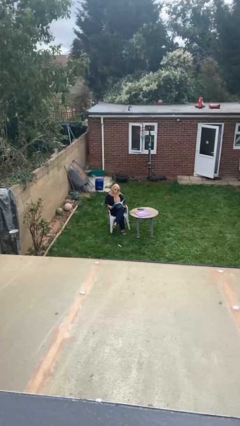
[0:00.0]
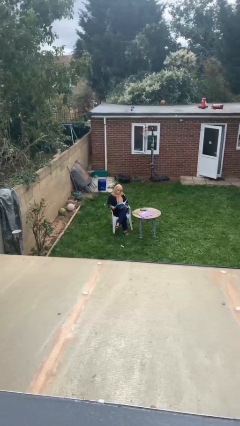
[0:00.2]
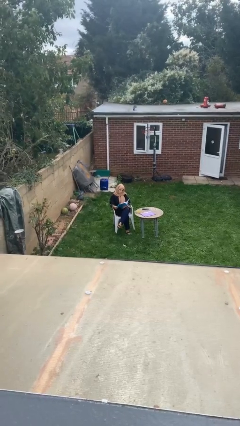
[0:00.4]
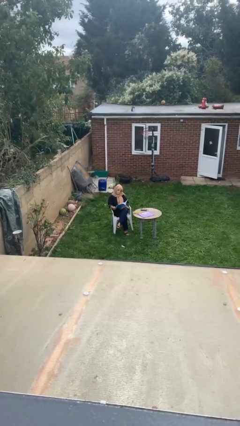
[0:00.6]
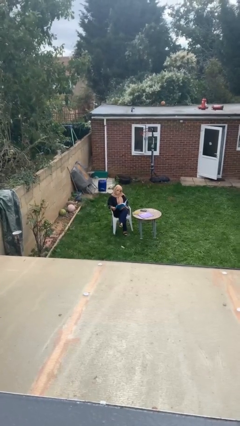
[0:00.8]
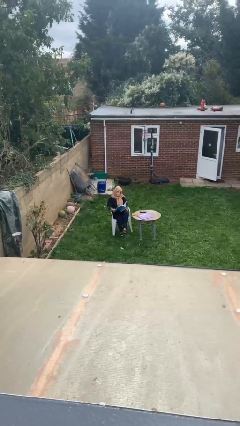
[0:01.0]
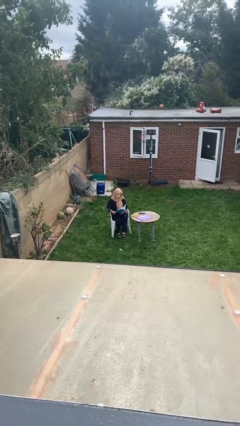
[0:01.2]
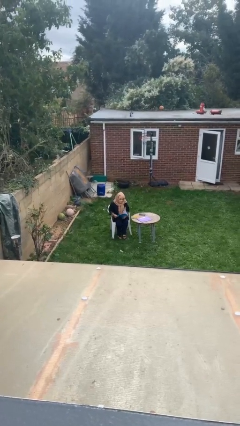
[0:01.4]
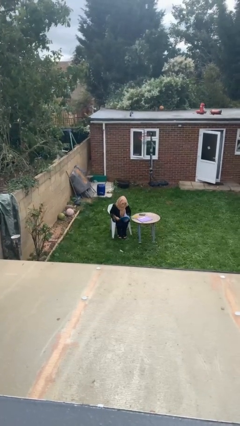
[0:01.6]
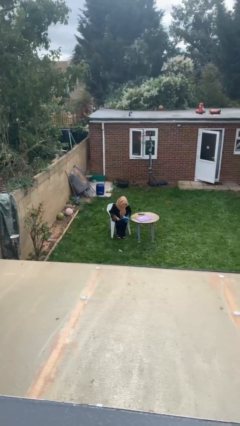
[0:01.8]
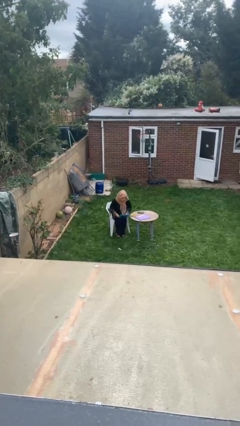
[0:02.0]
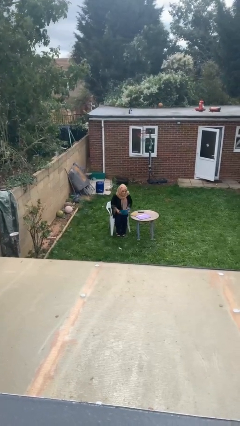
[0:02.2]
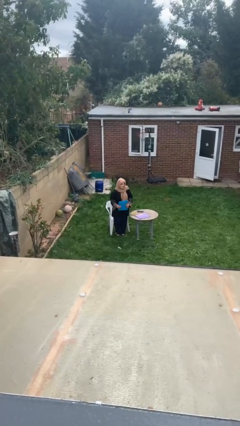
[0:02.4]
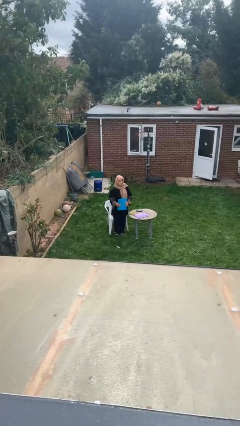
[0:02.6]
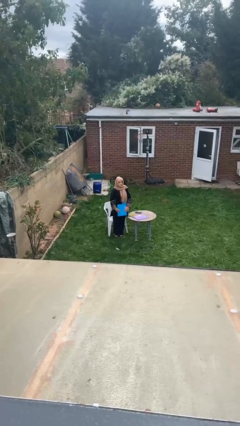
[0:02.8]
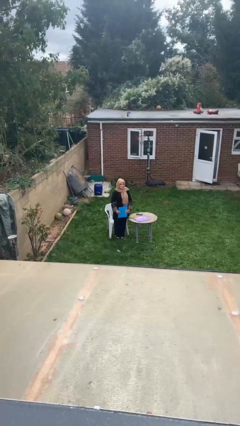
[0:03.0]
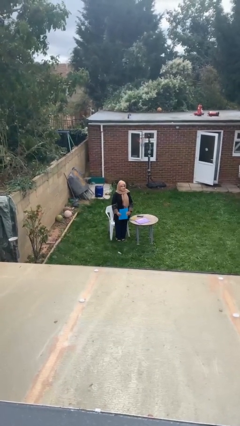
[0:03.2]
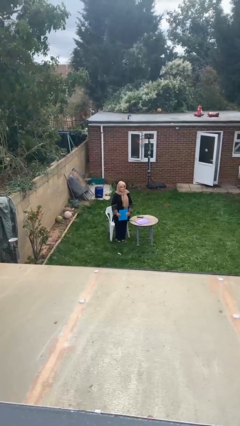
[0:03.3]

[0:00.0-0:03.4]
person stands up

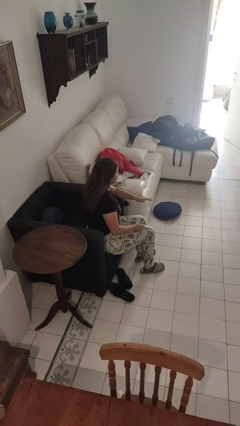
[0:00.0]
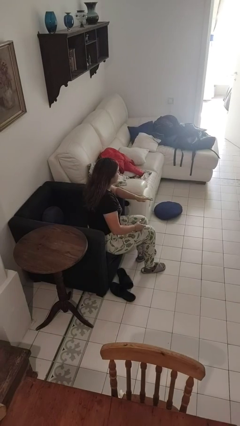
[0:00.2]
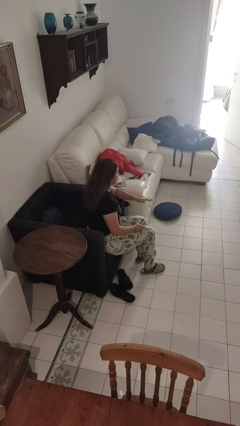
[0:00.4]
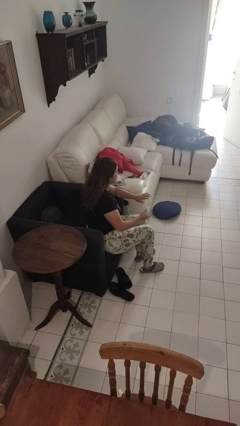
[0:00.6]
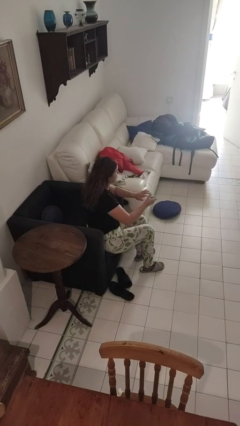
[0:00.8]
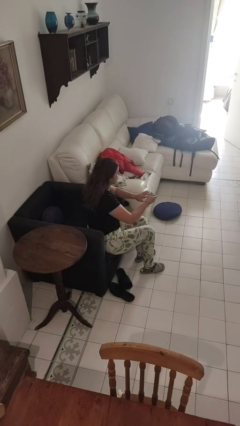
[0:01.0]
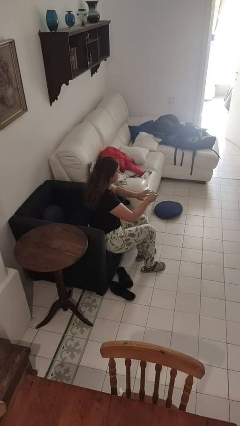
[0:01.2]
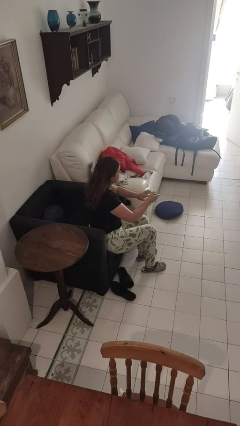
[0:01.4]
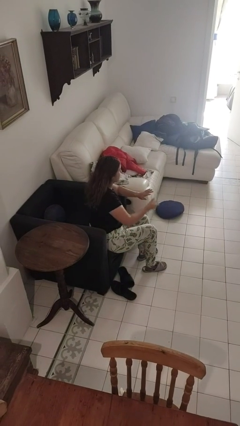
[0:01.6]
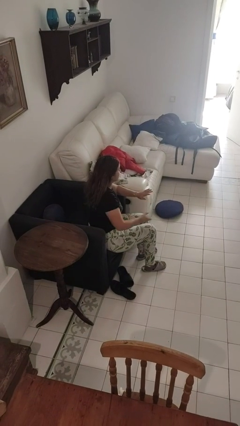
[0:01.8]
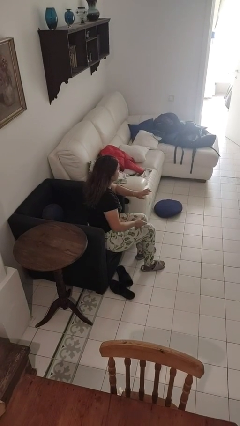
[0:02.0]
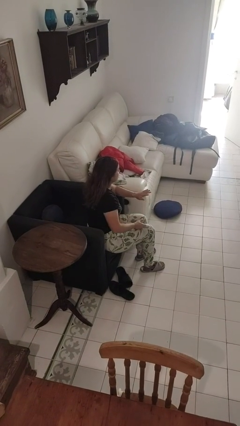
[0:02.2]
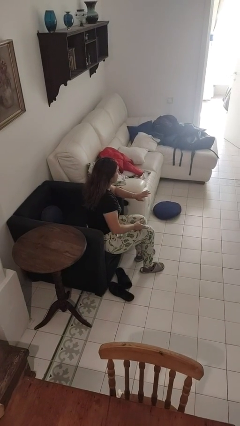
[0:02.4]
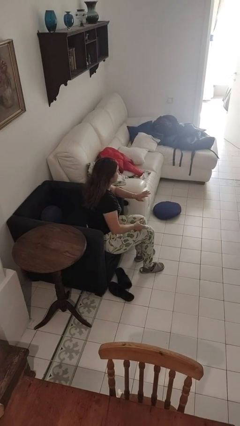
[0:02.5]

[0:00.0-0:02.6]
person clips fingernails

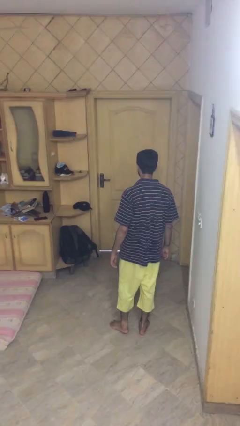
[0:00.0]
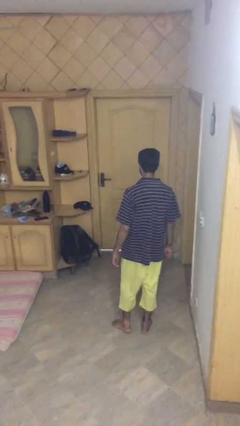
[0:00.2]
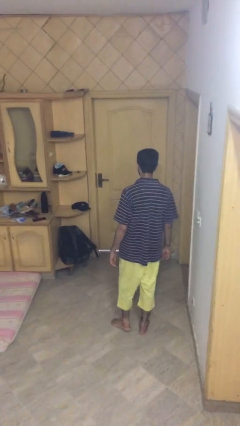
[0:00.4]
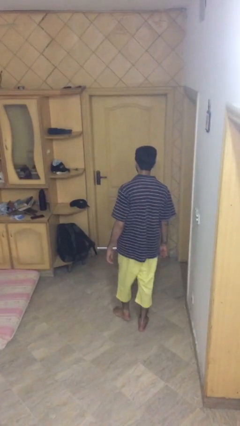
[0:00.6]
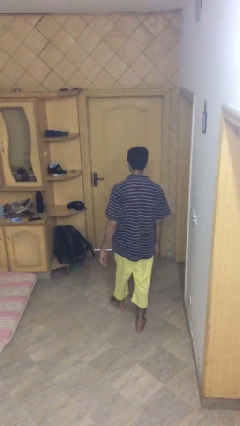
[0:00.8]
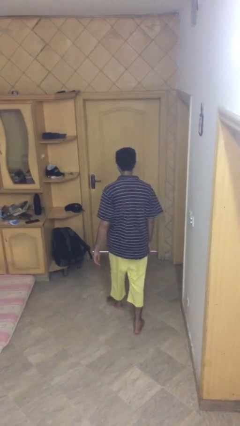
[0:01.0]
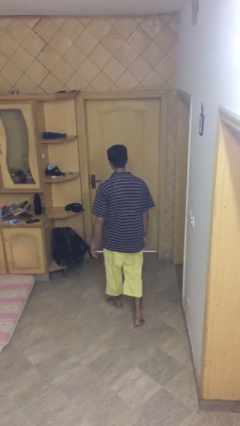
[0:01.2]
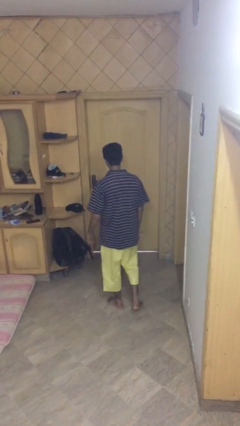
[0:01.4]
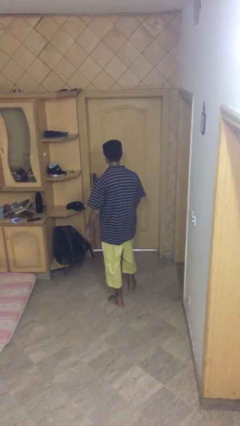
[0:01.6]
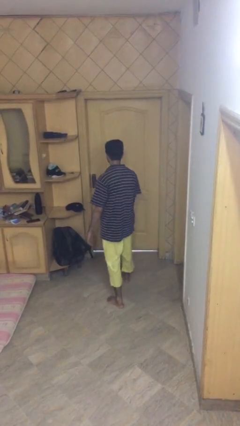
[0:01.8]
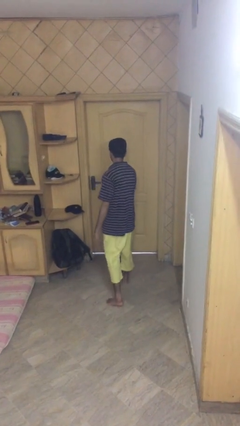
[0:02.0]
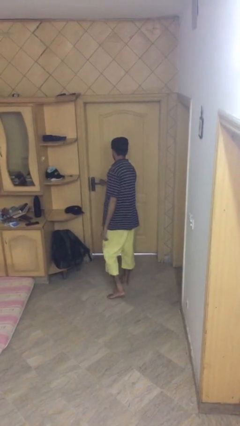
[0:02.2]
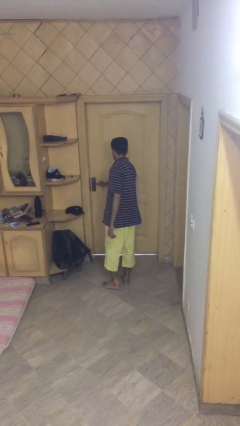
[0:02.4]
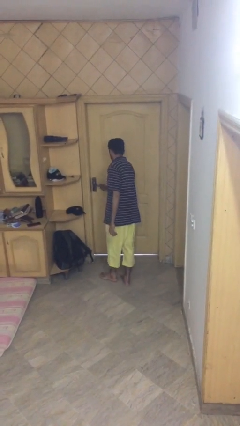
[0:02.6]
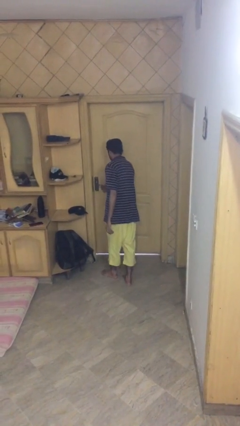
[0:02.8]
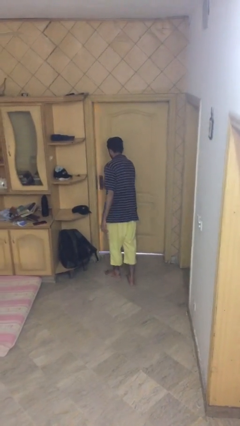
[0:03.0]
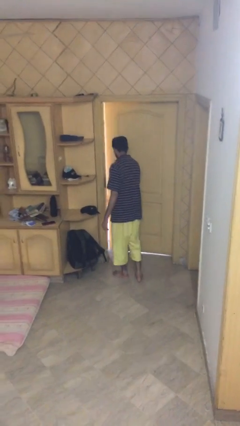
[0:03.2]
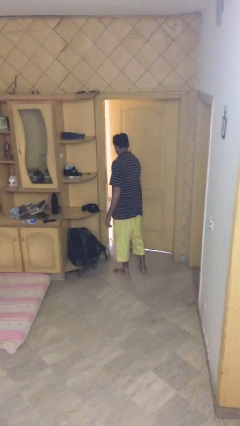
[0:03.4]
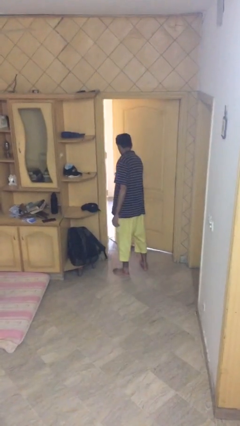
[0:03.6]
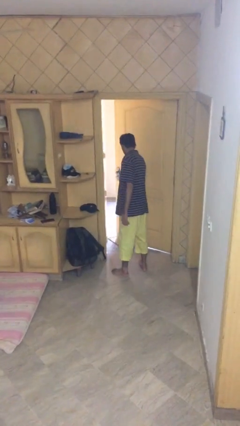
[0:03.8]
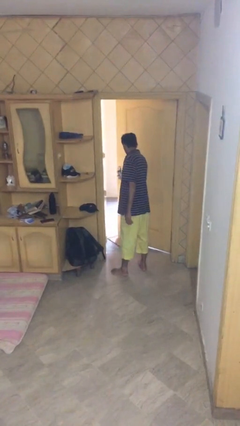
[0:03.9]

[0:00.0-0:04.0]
person opens facility door

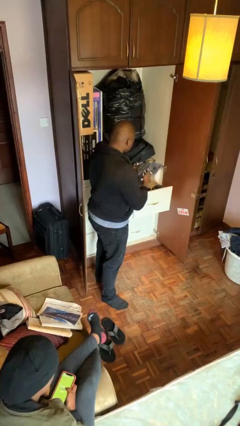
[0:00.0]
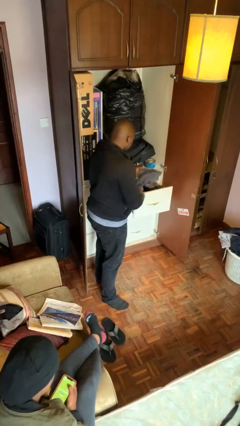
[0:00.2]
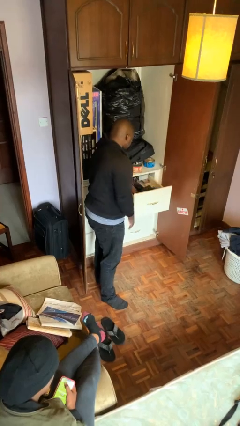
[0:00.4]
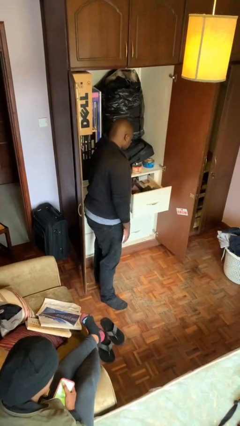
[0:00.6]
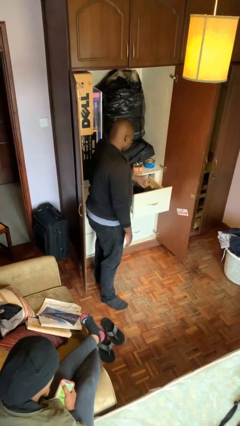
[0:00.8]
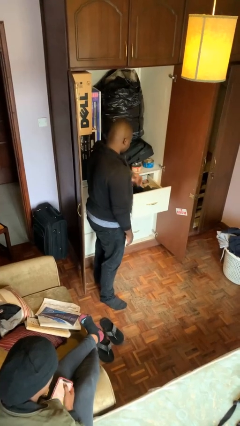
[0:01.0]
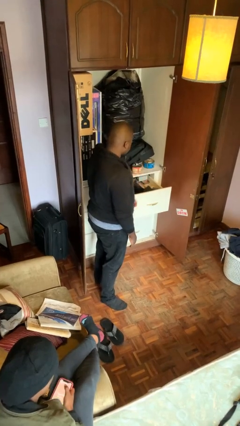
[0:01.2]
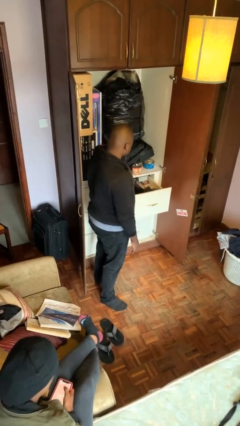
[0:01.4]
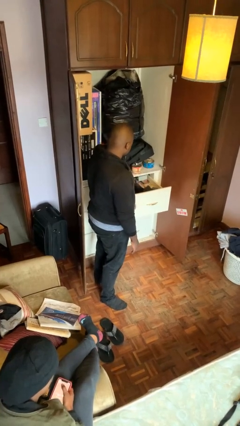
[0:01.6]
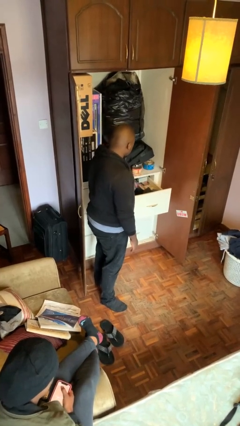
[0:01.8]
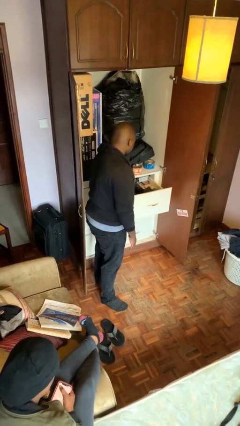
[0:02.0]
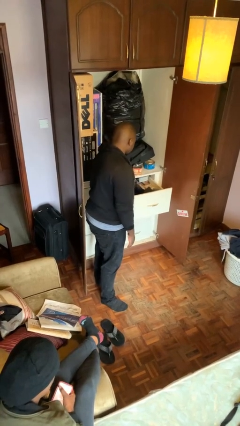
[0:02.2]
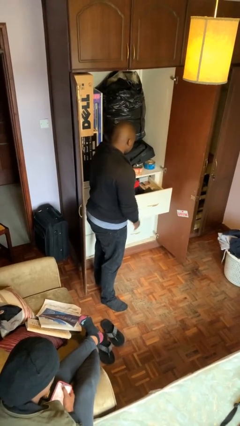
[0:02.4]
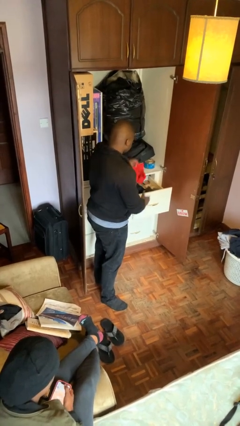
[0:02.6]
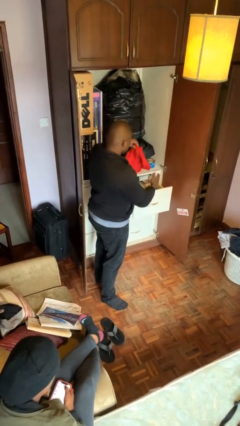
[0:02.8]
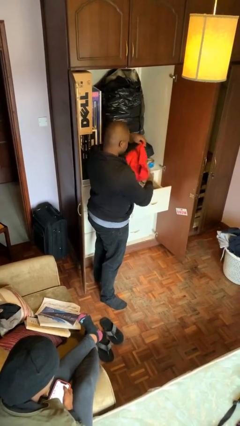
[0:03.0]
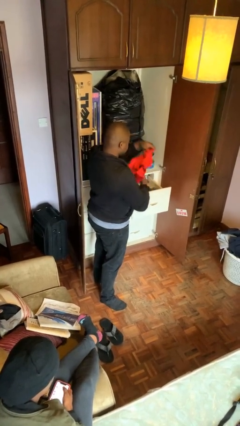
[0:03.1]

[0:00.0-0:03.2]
person puts clothes into dresser

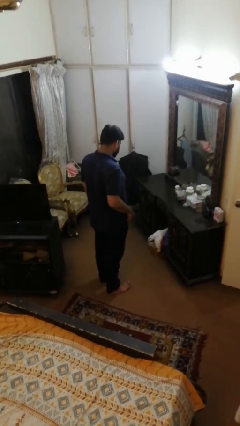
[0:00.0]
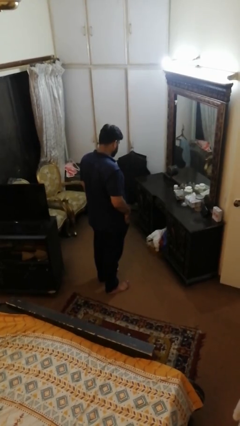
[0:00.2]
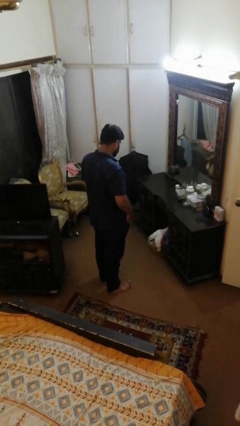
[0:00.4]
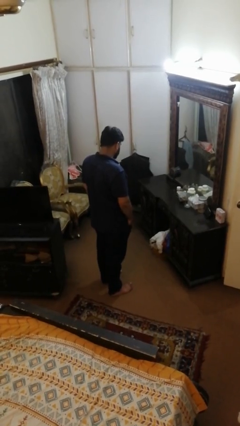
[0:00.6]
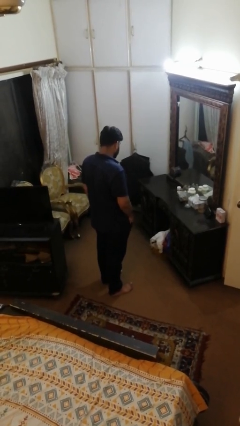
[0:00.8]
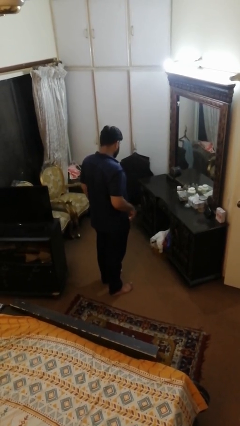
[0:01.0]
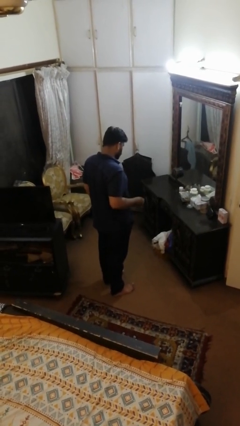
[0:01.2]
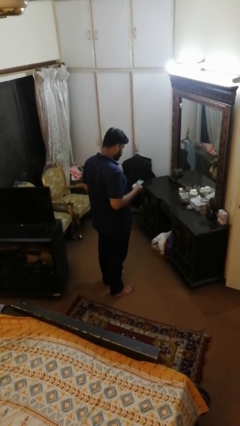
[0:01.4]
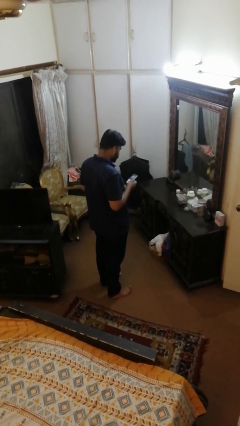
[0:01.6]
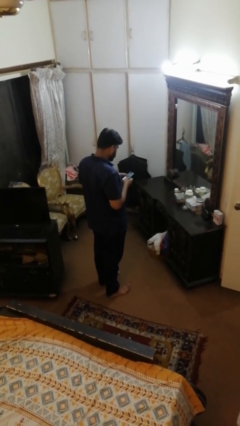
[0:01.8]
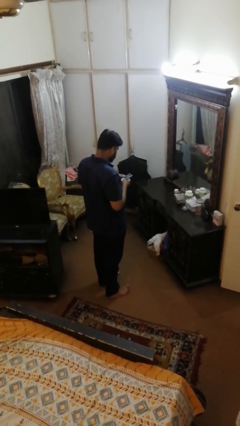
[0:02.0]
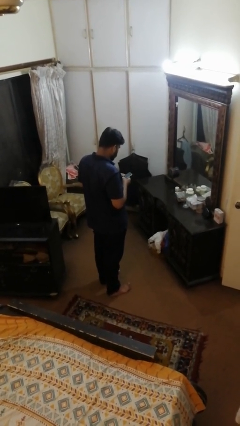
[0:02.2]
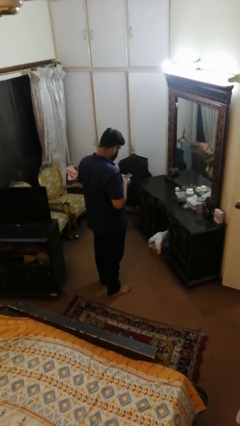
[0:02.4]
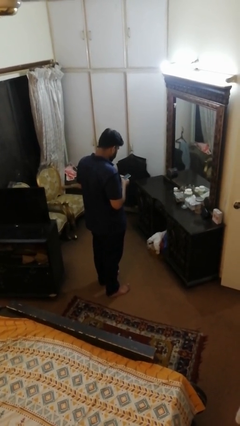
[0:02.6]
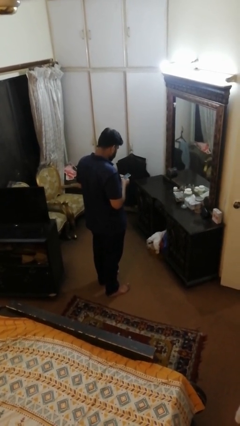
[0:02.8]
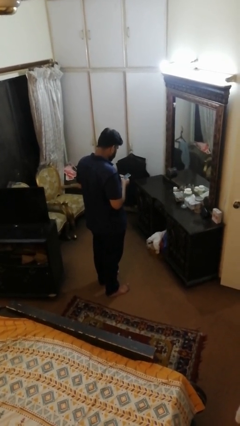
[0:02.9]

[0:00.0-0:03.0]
person takes phone from pocket

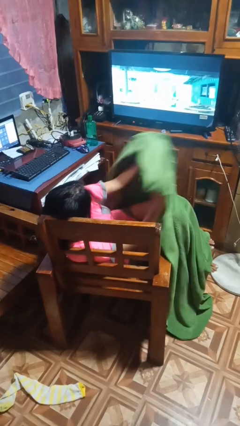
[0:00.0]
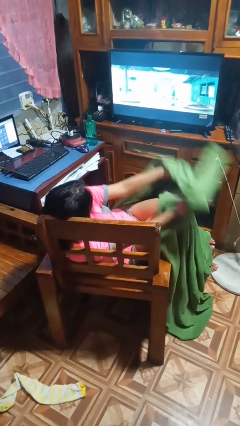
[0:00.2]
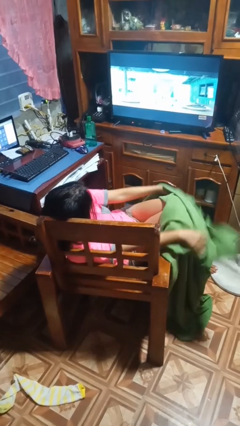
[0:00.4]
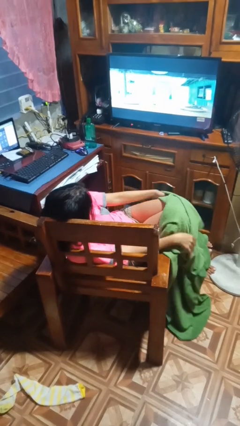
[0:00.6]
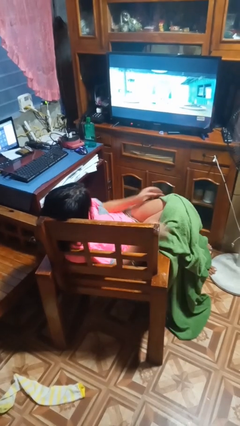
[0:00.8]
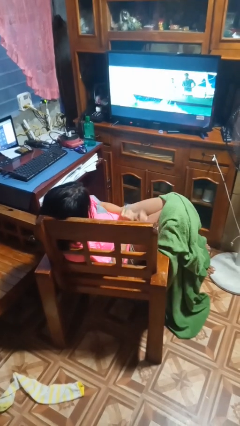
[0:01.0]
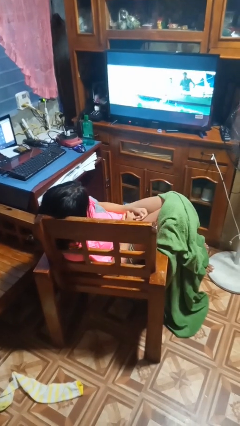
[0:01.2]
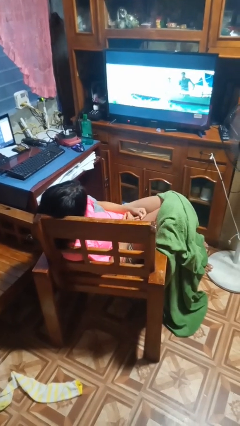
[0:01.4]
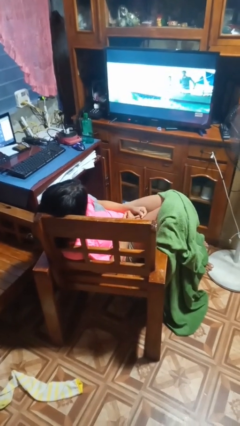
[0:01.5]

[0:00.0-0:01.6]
person uncovers with blanket
